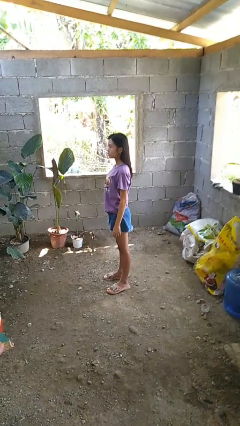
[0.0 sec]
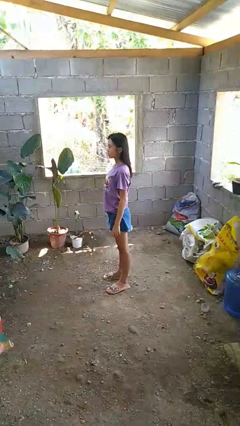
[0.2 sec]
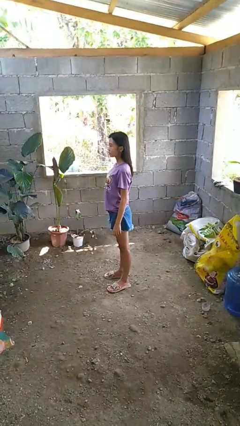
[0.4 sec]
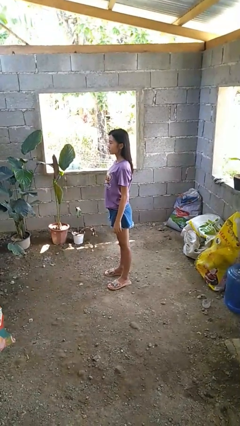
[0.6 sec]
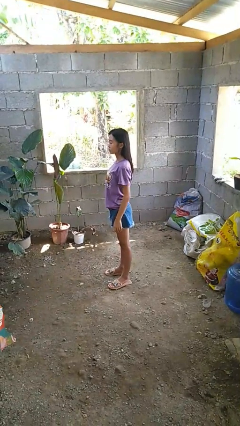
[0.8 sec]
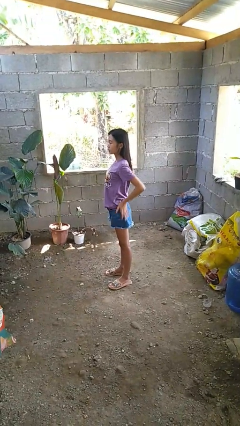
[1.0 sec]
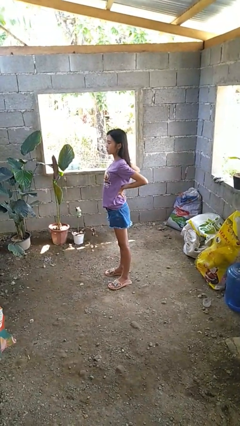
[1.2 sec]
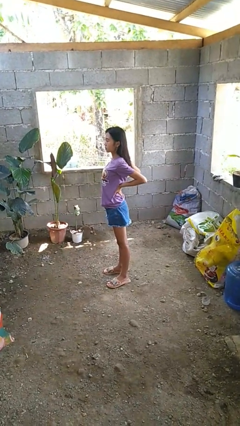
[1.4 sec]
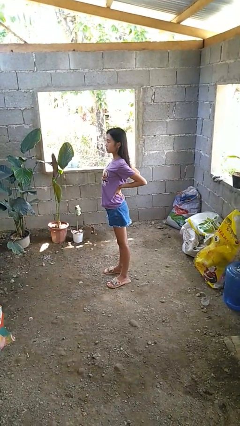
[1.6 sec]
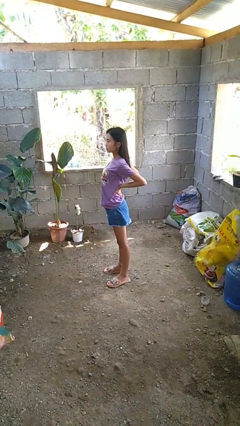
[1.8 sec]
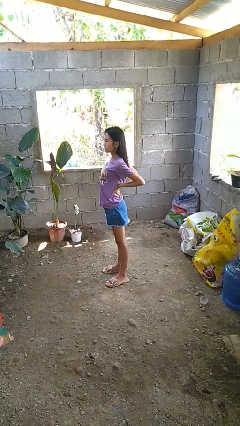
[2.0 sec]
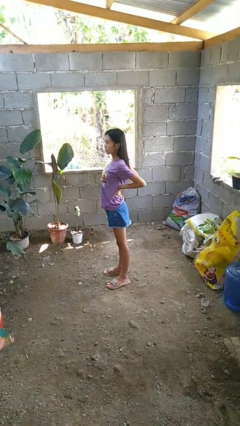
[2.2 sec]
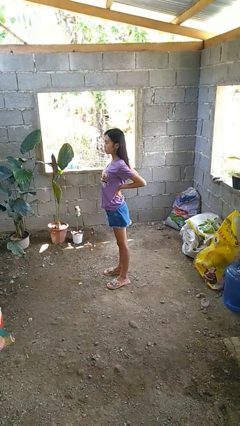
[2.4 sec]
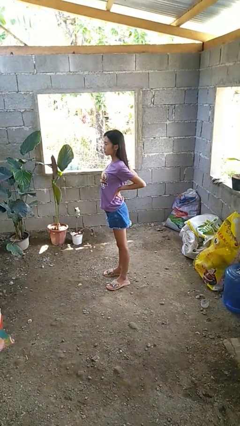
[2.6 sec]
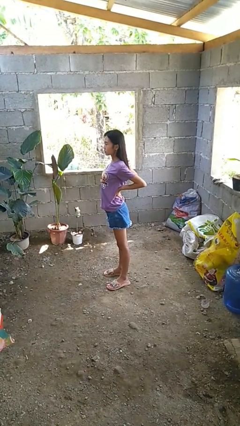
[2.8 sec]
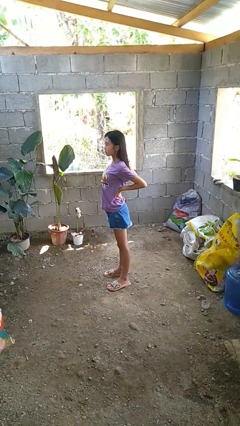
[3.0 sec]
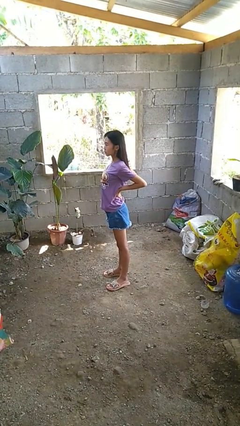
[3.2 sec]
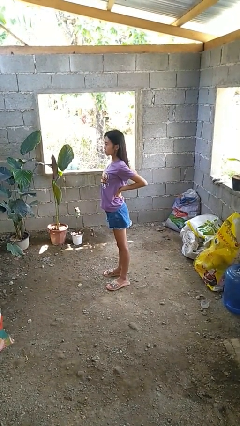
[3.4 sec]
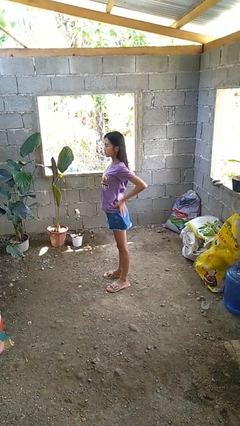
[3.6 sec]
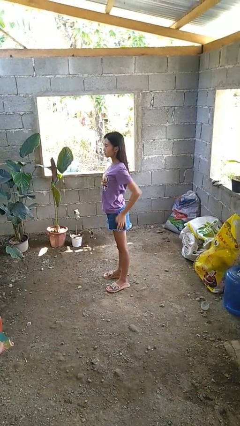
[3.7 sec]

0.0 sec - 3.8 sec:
person stretches back

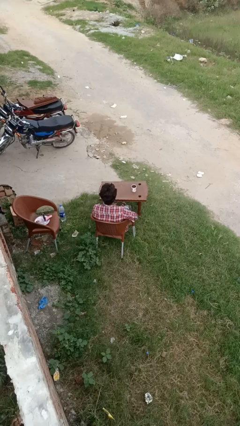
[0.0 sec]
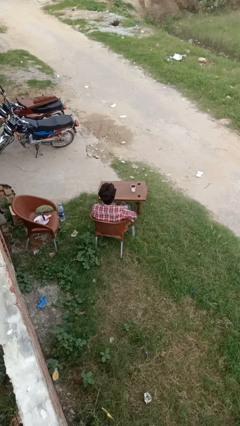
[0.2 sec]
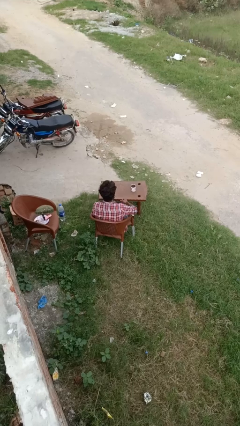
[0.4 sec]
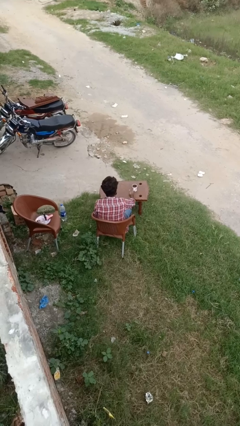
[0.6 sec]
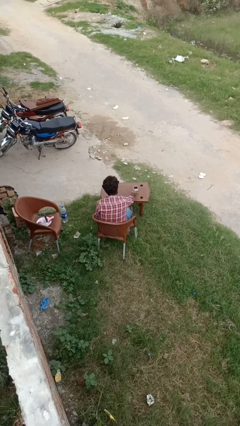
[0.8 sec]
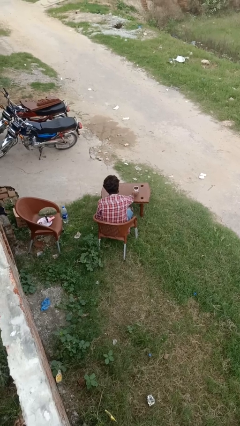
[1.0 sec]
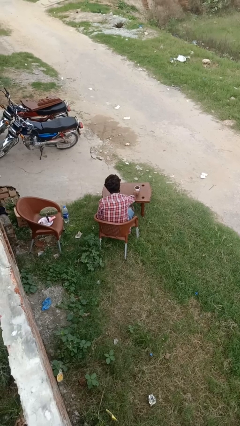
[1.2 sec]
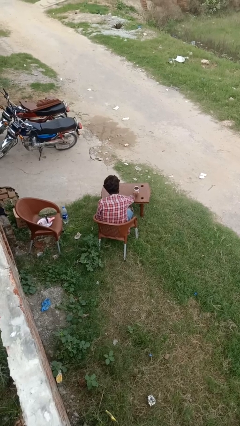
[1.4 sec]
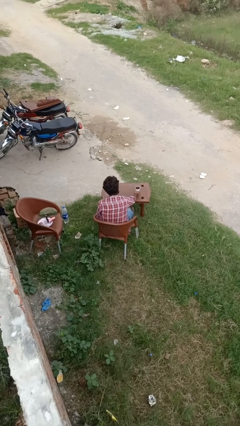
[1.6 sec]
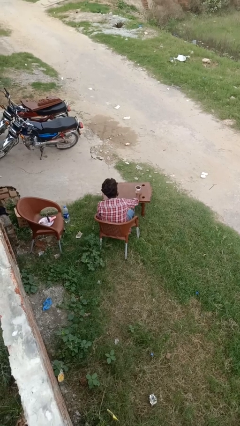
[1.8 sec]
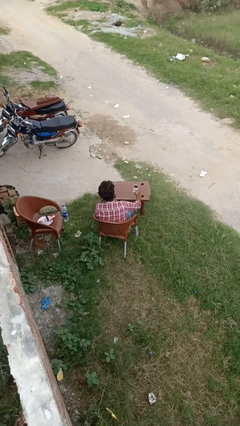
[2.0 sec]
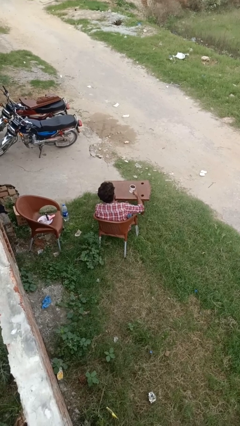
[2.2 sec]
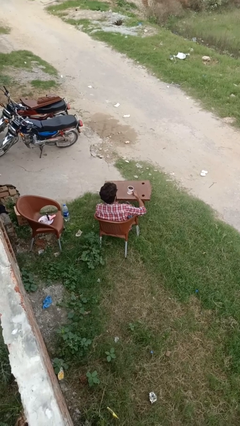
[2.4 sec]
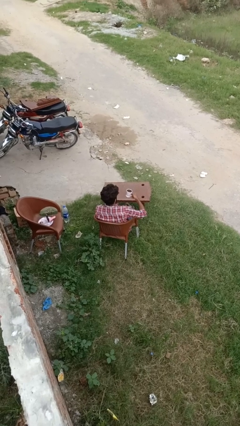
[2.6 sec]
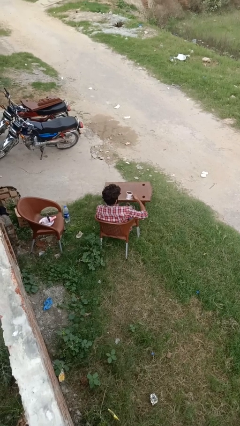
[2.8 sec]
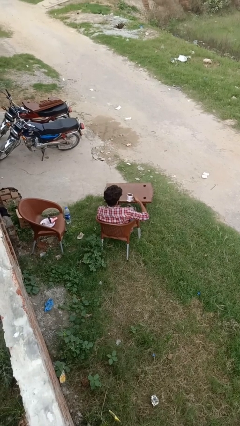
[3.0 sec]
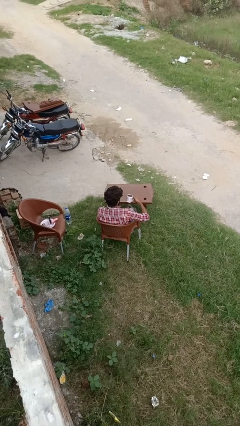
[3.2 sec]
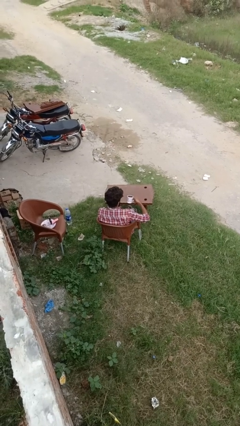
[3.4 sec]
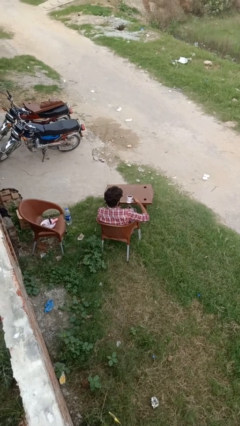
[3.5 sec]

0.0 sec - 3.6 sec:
person picks up object from table

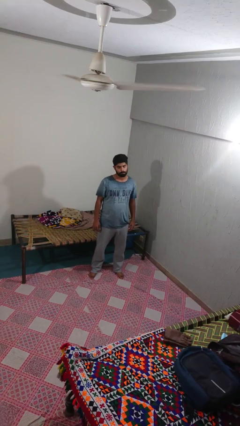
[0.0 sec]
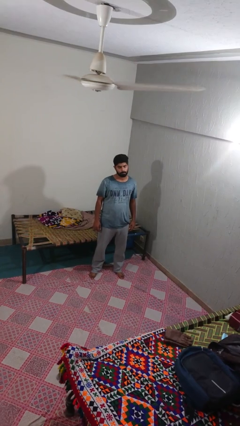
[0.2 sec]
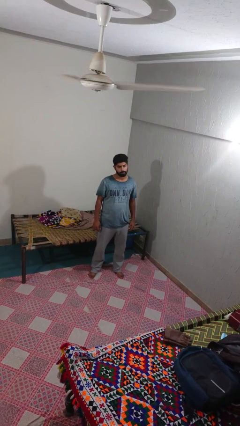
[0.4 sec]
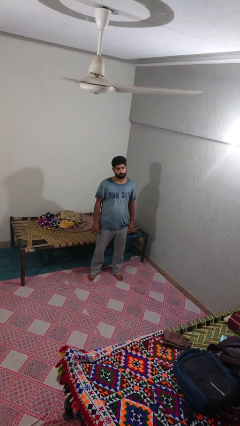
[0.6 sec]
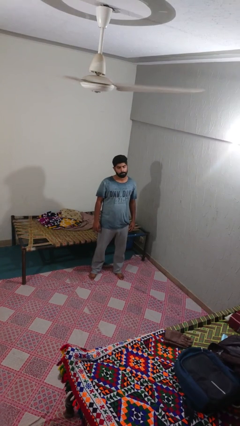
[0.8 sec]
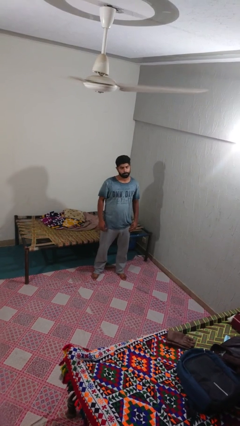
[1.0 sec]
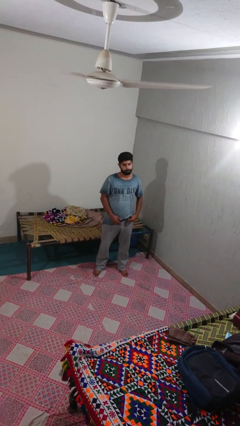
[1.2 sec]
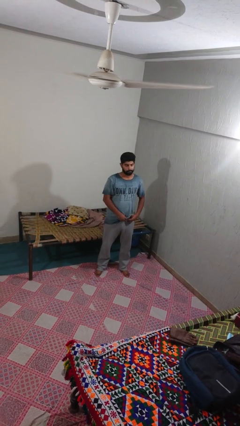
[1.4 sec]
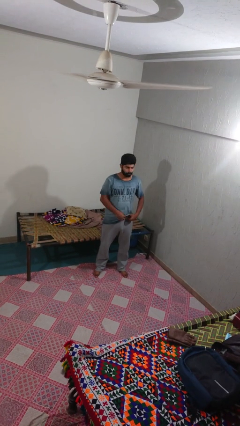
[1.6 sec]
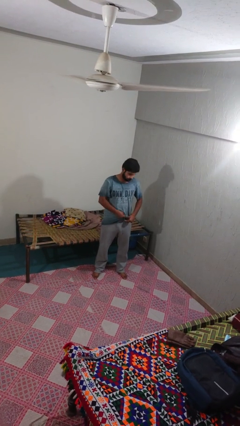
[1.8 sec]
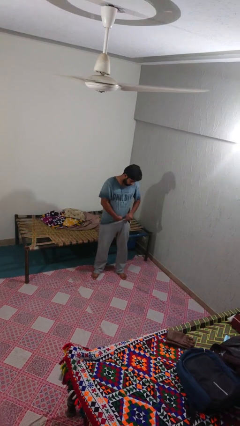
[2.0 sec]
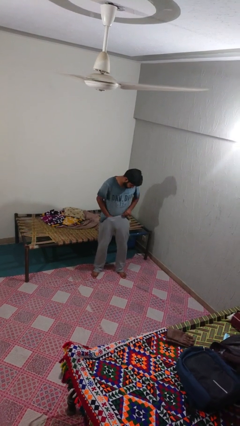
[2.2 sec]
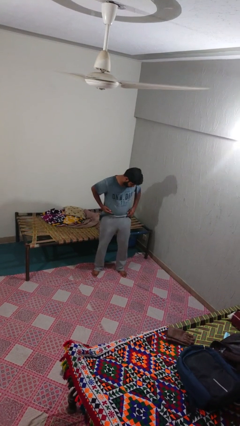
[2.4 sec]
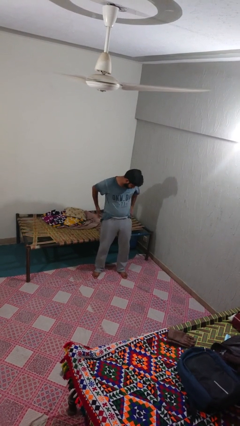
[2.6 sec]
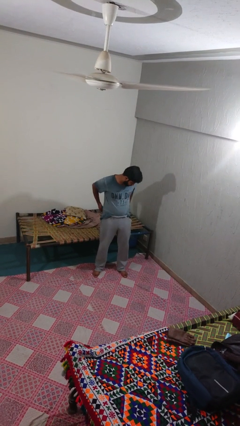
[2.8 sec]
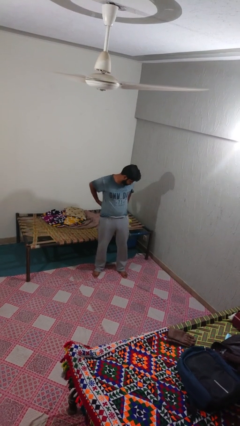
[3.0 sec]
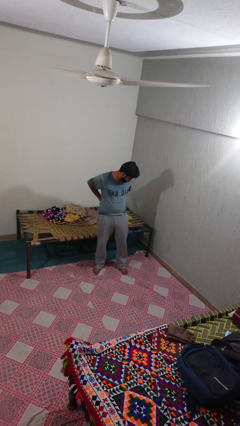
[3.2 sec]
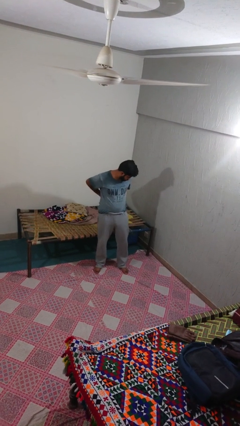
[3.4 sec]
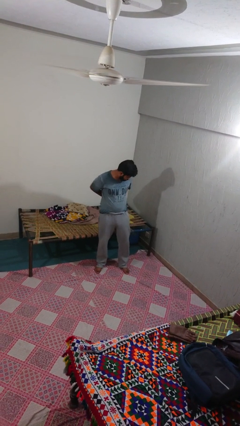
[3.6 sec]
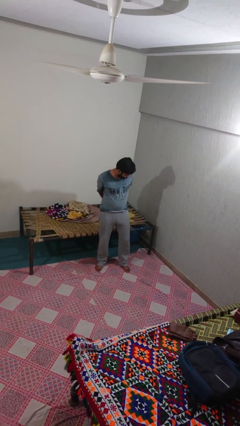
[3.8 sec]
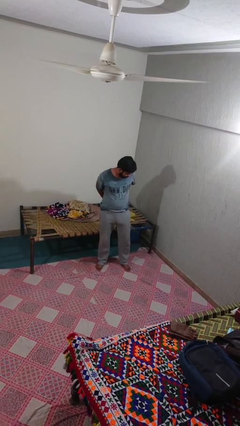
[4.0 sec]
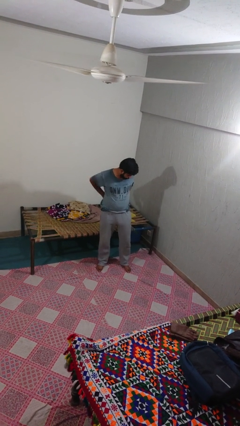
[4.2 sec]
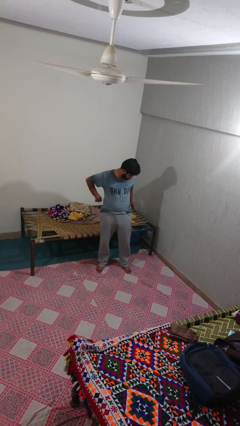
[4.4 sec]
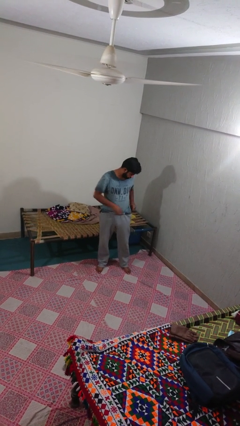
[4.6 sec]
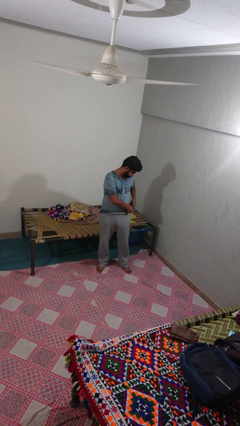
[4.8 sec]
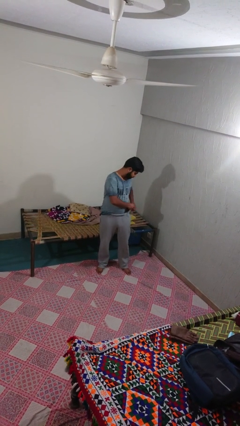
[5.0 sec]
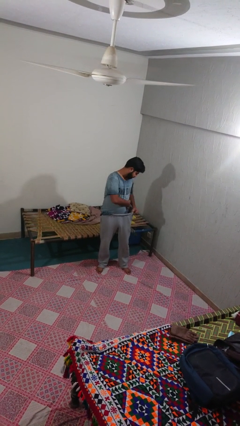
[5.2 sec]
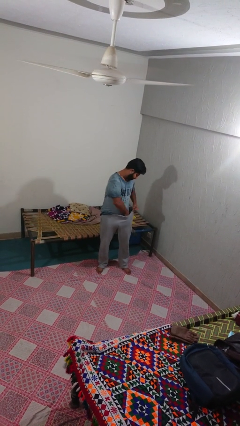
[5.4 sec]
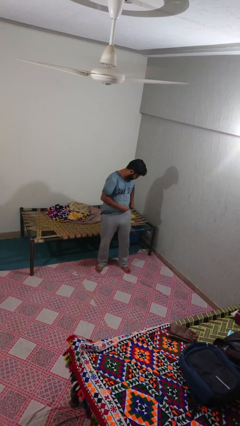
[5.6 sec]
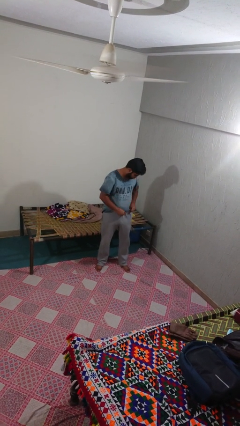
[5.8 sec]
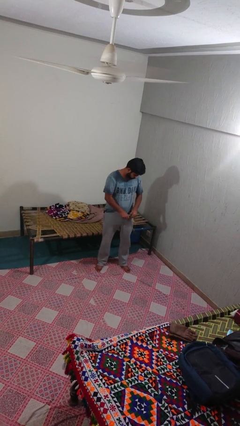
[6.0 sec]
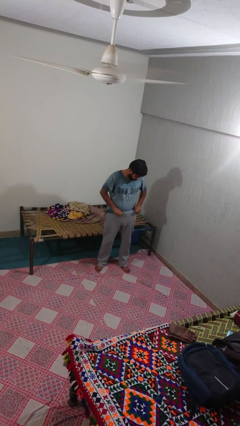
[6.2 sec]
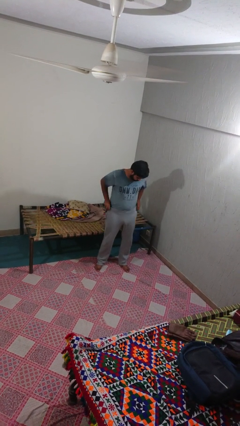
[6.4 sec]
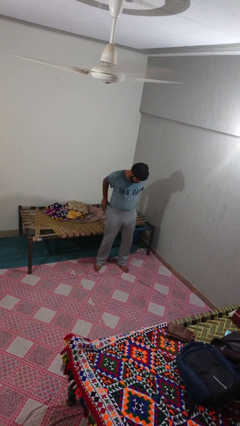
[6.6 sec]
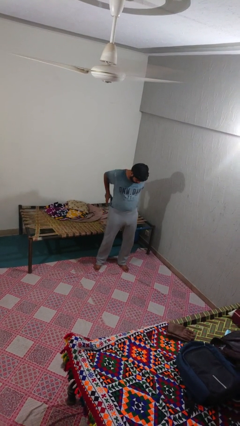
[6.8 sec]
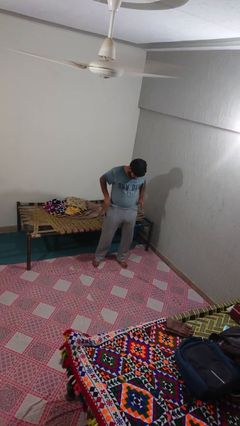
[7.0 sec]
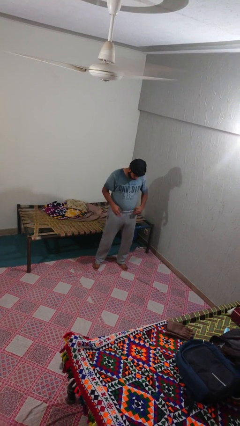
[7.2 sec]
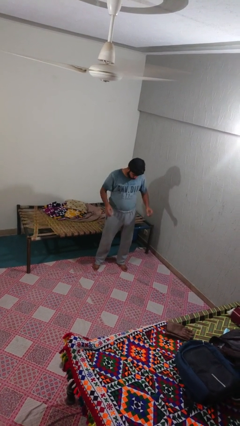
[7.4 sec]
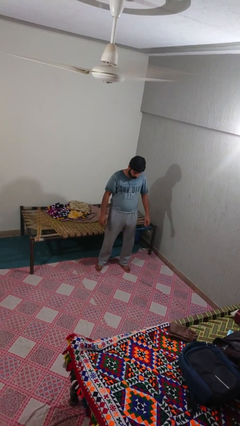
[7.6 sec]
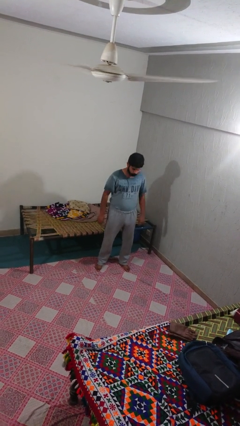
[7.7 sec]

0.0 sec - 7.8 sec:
person tucks in shirt

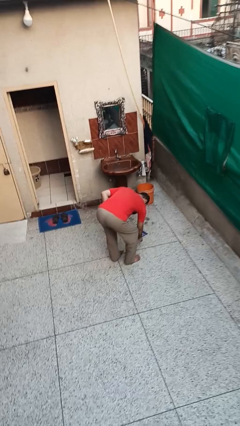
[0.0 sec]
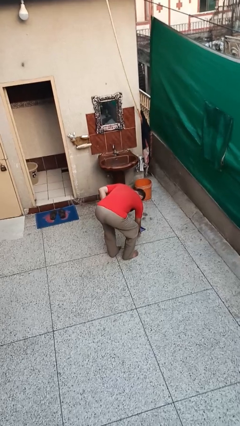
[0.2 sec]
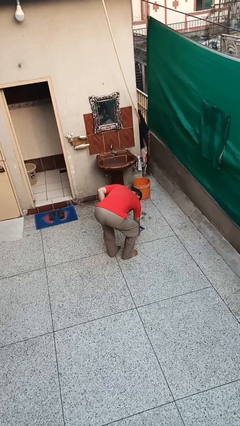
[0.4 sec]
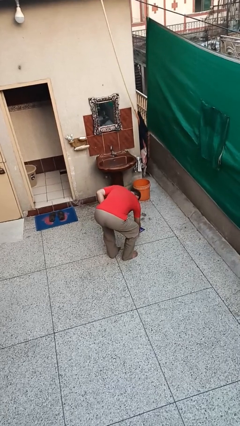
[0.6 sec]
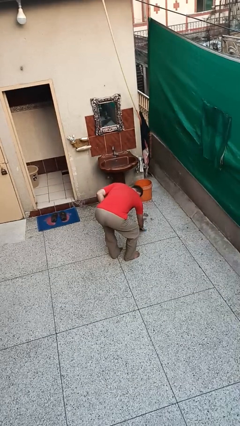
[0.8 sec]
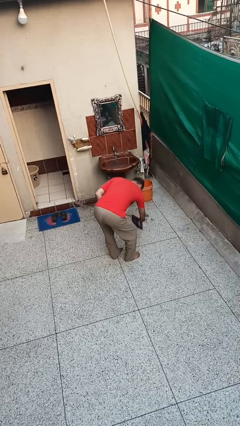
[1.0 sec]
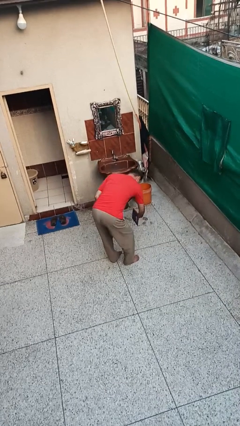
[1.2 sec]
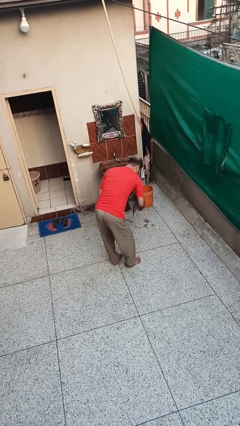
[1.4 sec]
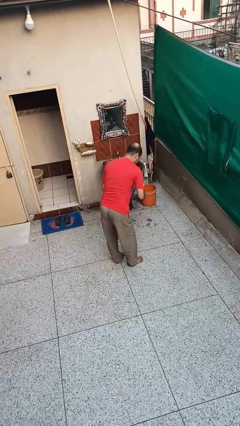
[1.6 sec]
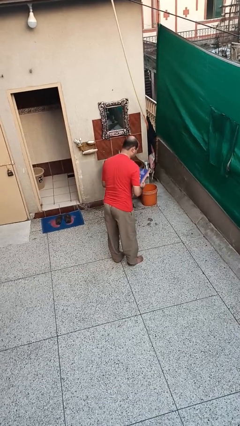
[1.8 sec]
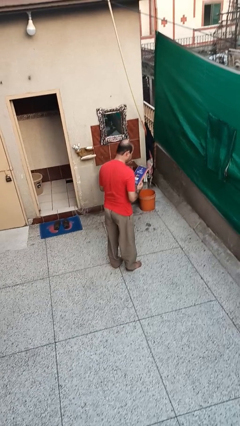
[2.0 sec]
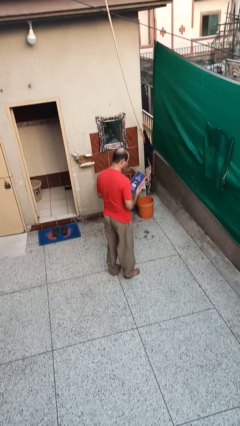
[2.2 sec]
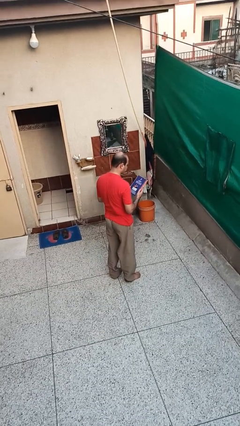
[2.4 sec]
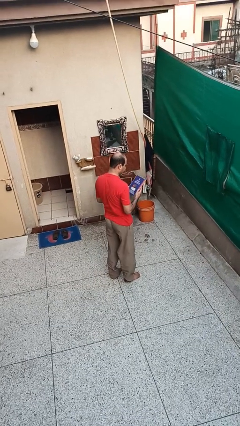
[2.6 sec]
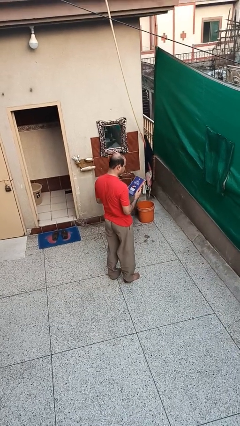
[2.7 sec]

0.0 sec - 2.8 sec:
person picks up object from floor
